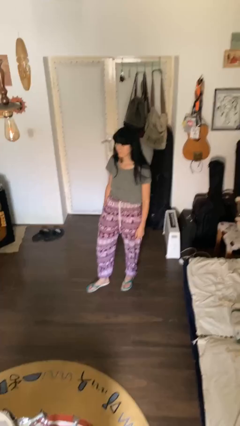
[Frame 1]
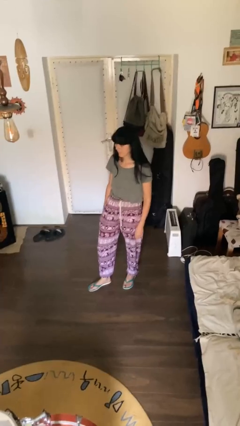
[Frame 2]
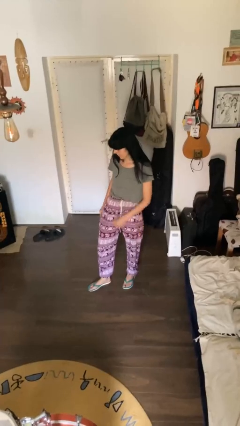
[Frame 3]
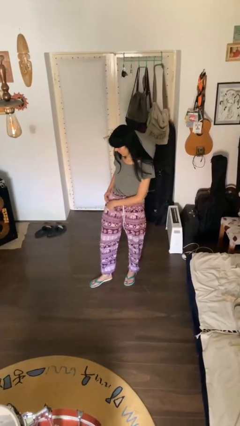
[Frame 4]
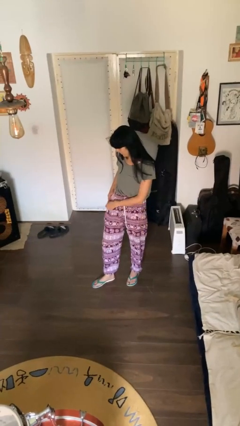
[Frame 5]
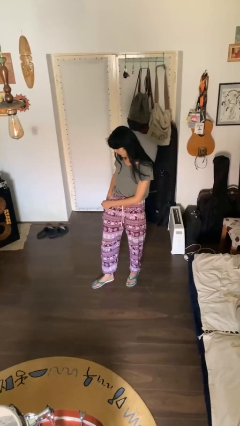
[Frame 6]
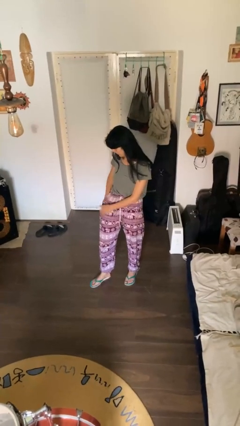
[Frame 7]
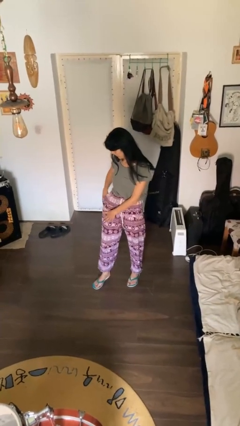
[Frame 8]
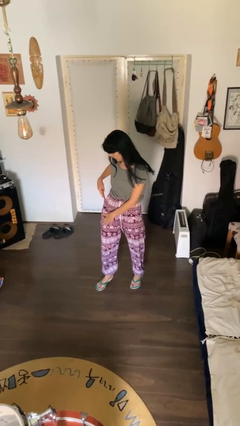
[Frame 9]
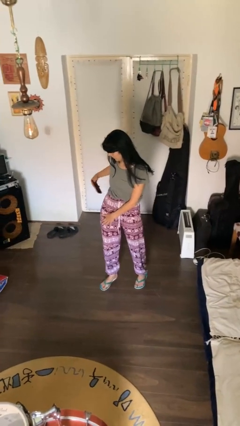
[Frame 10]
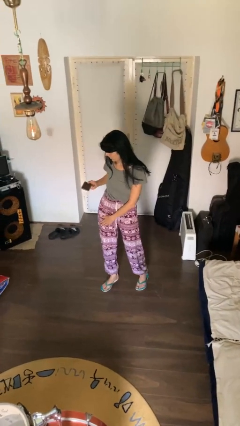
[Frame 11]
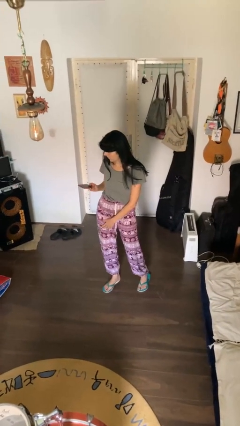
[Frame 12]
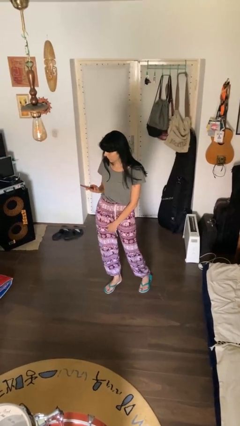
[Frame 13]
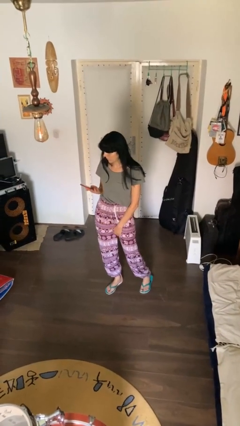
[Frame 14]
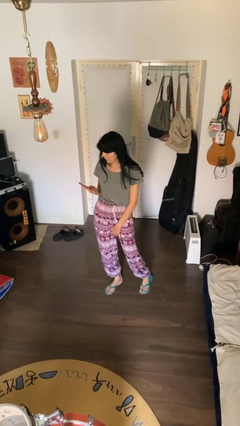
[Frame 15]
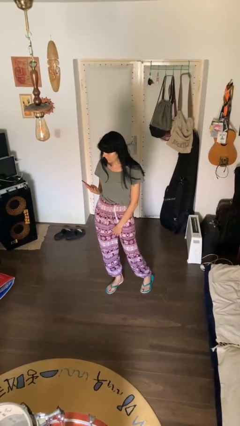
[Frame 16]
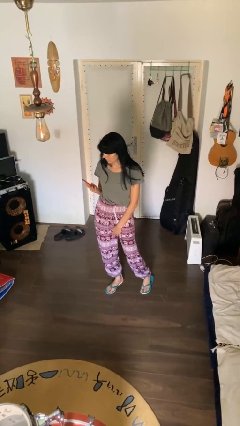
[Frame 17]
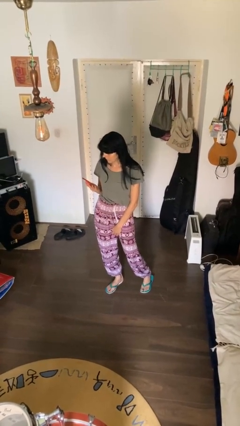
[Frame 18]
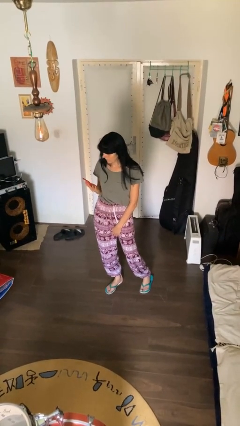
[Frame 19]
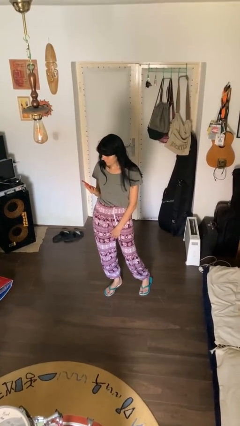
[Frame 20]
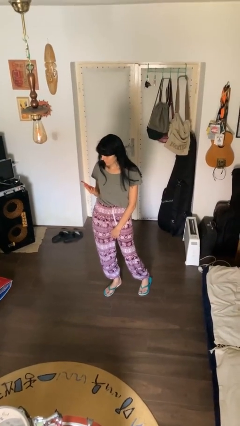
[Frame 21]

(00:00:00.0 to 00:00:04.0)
person takes phone from pocket

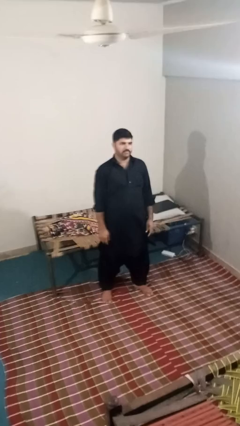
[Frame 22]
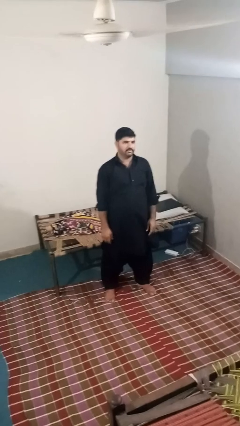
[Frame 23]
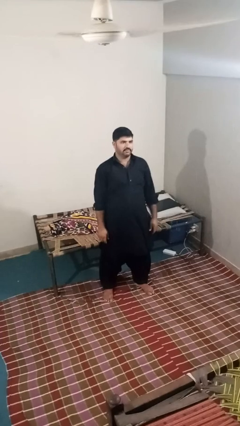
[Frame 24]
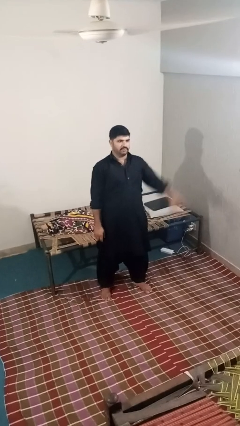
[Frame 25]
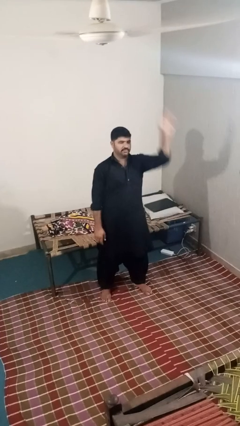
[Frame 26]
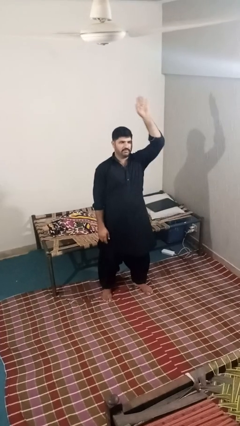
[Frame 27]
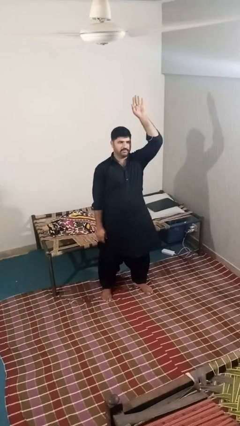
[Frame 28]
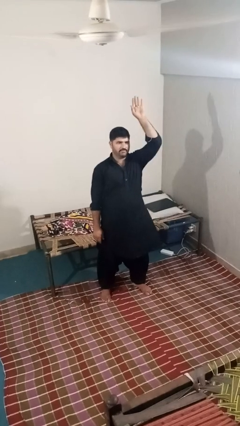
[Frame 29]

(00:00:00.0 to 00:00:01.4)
person gestures raise hand

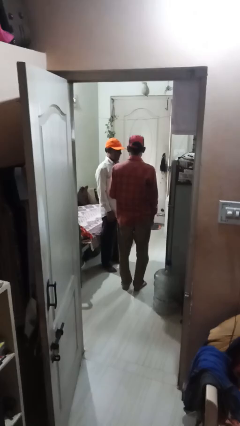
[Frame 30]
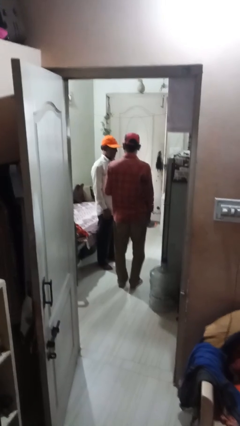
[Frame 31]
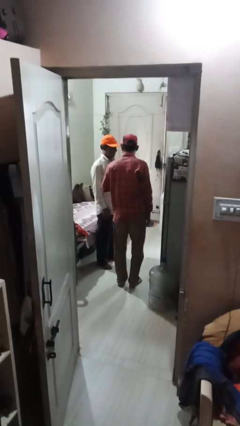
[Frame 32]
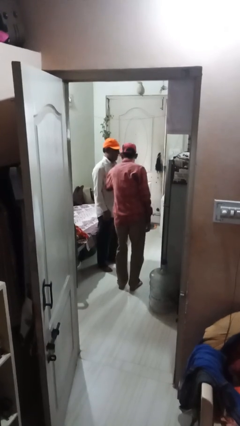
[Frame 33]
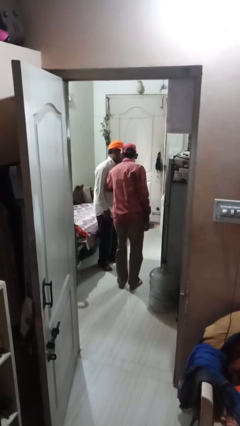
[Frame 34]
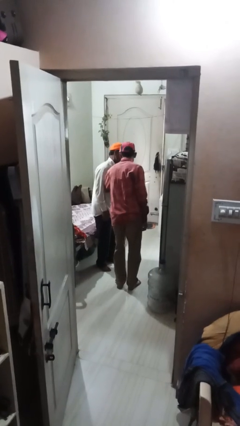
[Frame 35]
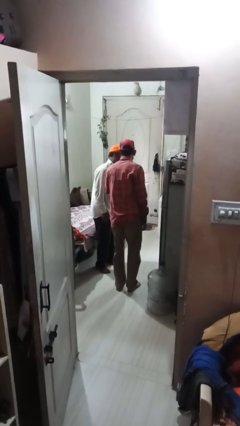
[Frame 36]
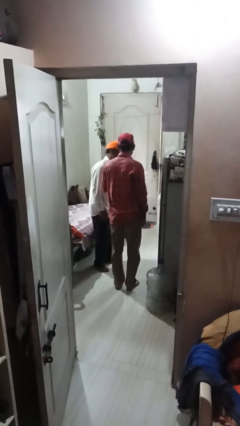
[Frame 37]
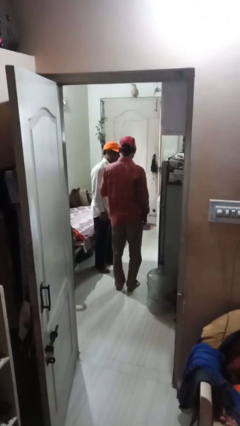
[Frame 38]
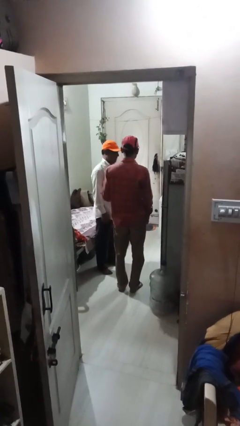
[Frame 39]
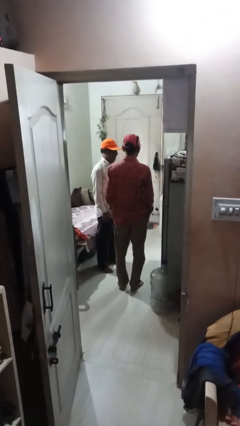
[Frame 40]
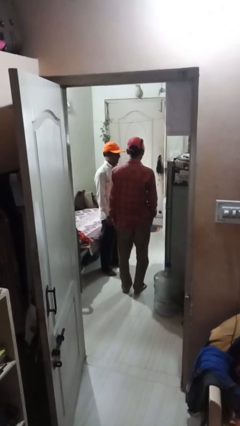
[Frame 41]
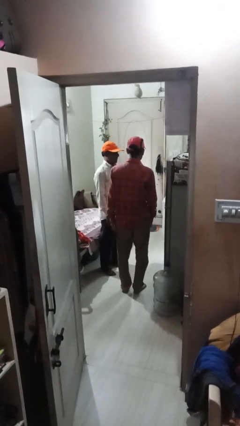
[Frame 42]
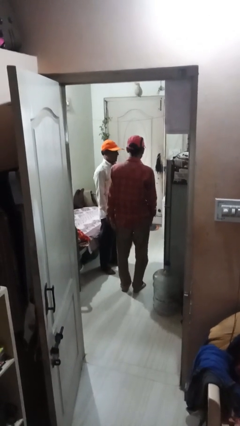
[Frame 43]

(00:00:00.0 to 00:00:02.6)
person nudges person with elbow

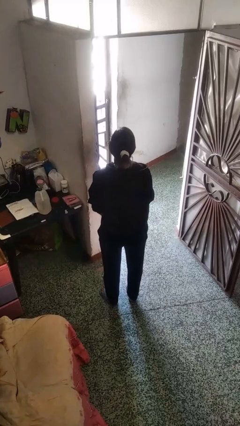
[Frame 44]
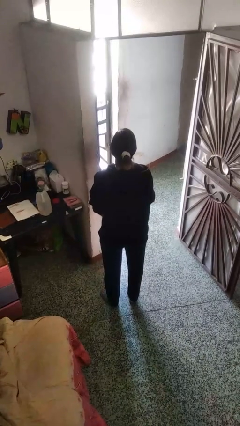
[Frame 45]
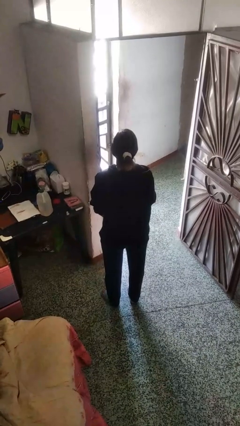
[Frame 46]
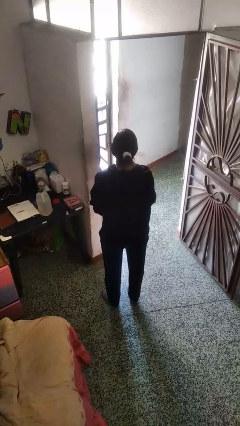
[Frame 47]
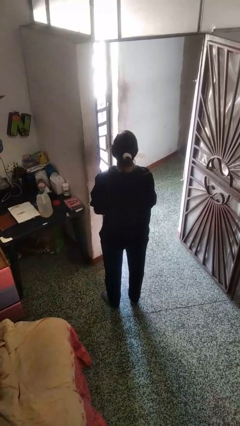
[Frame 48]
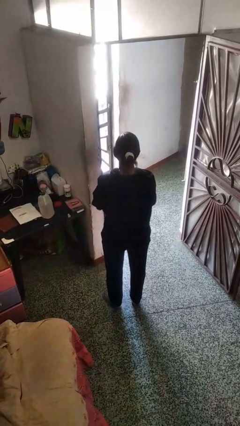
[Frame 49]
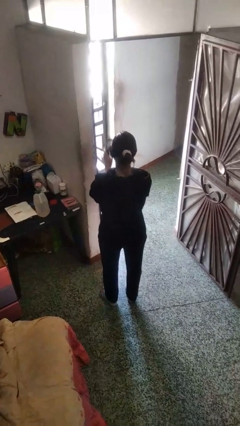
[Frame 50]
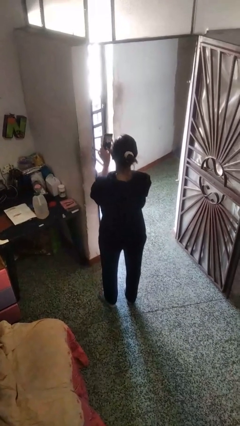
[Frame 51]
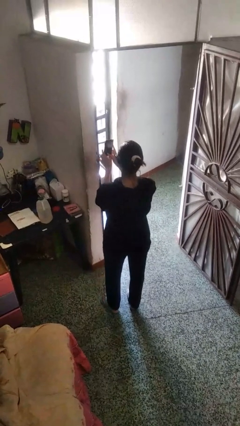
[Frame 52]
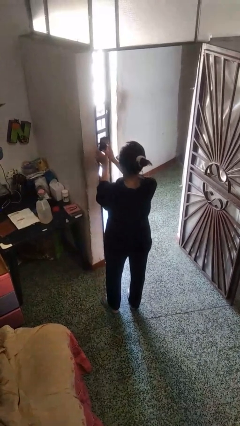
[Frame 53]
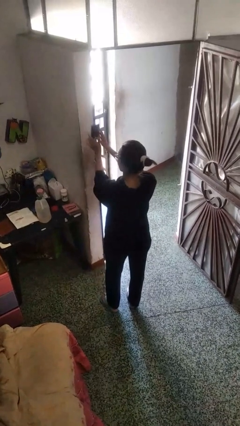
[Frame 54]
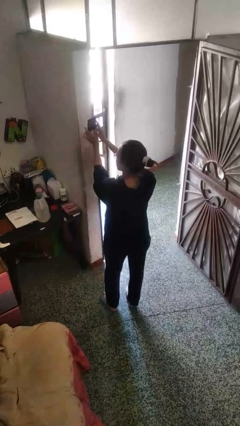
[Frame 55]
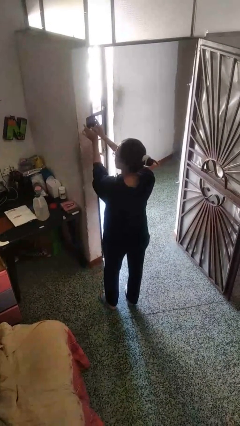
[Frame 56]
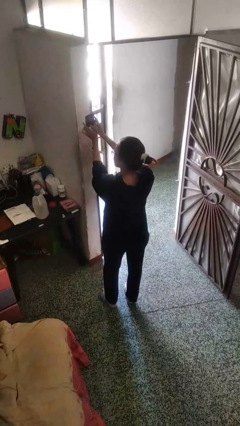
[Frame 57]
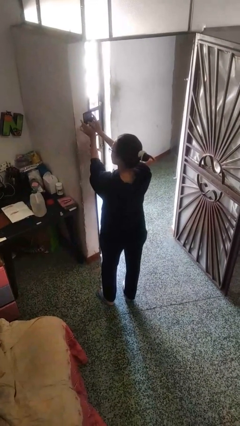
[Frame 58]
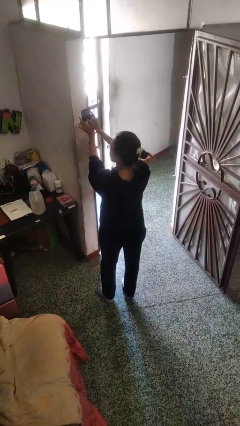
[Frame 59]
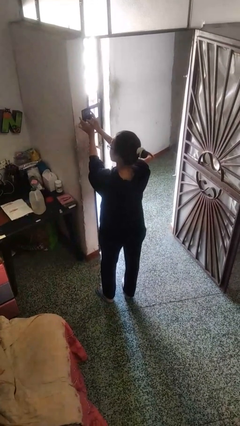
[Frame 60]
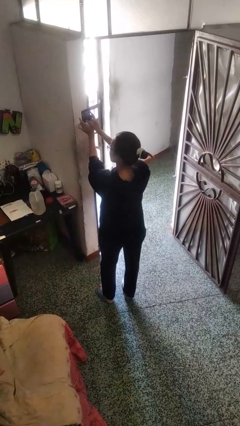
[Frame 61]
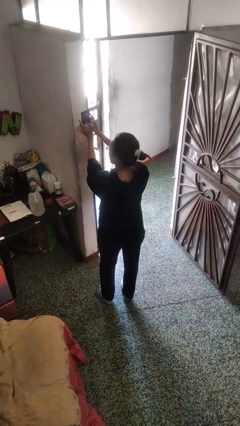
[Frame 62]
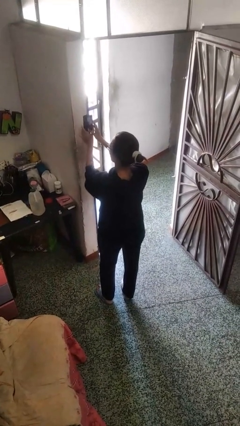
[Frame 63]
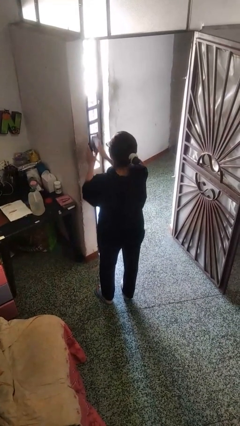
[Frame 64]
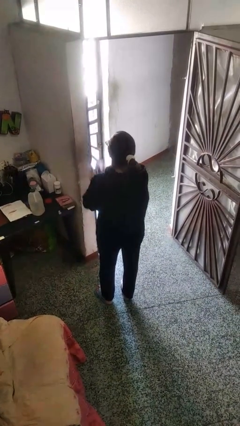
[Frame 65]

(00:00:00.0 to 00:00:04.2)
person takes selfie

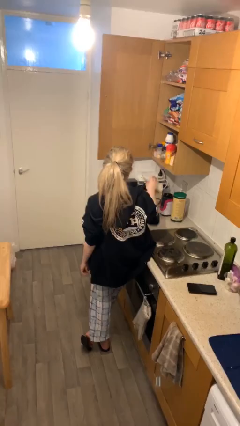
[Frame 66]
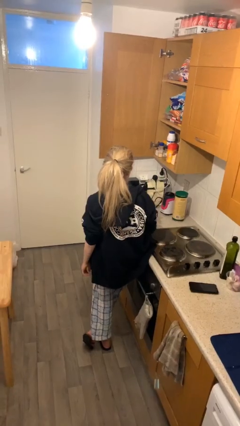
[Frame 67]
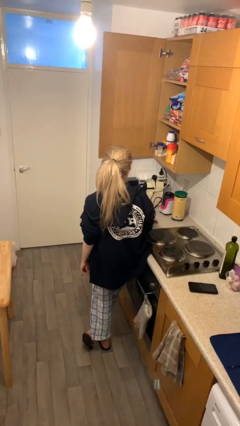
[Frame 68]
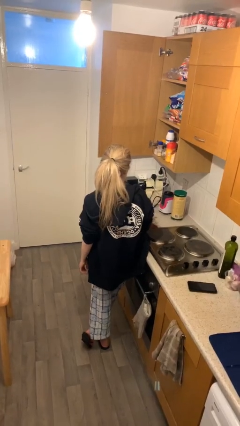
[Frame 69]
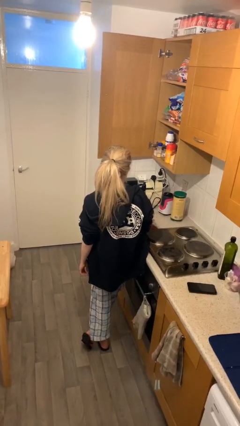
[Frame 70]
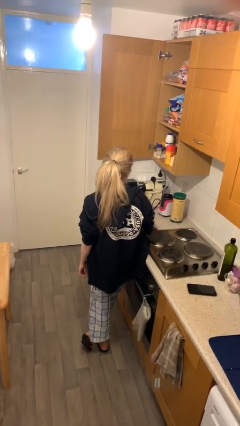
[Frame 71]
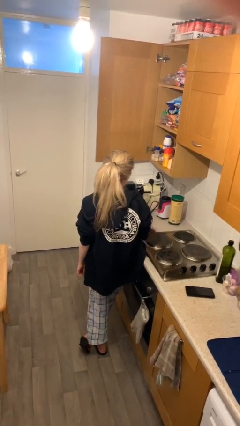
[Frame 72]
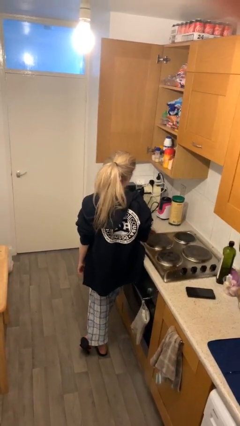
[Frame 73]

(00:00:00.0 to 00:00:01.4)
person puts down object on table

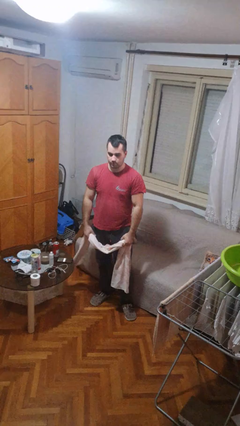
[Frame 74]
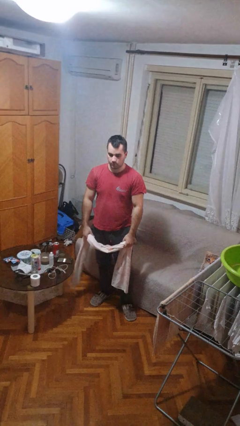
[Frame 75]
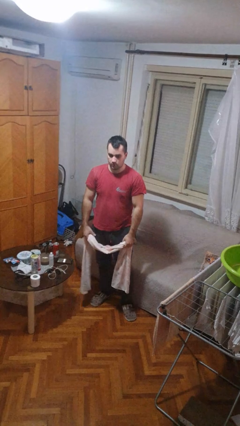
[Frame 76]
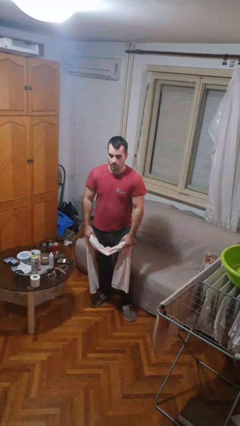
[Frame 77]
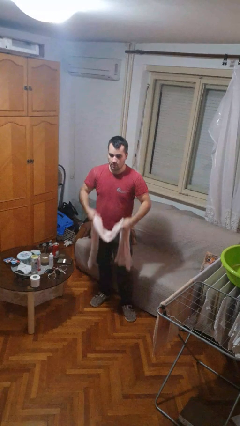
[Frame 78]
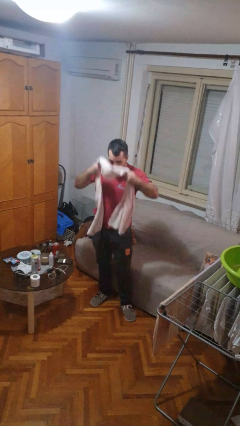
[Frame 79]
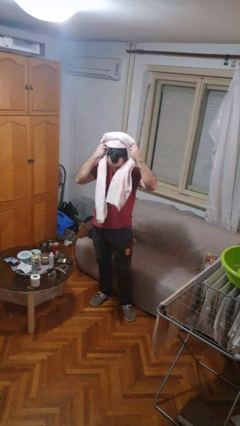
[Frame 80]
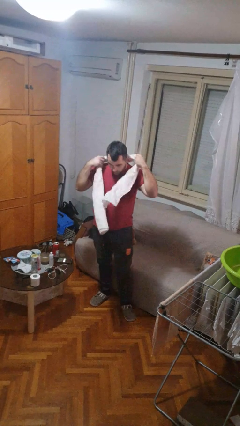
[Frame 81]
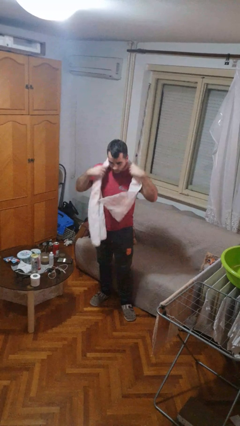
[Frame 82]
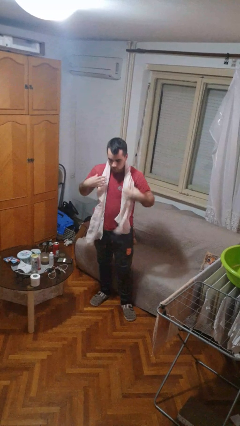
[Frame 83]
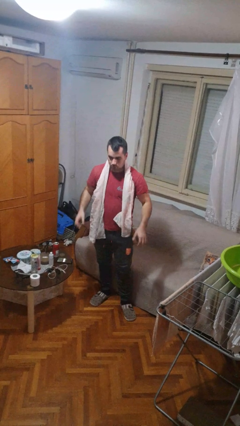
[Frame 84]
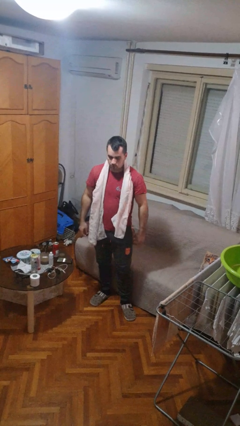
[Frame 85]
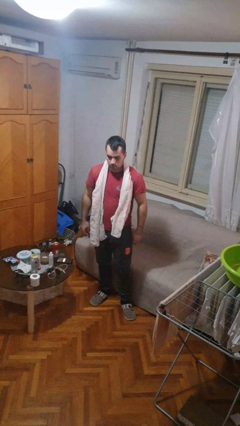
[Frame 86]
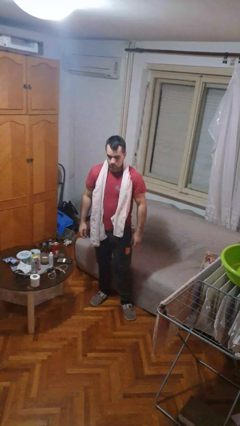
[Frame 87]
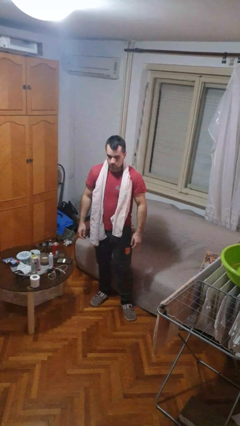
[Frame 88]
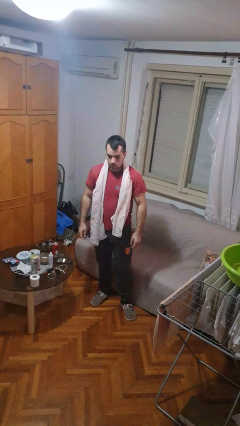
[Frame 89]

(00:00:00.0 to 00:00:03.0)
person puts on scarf

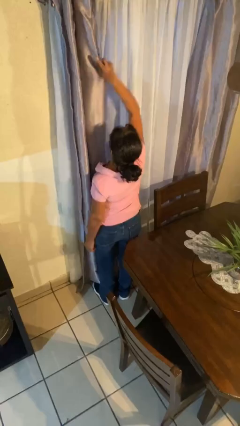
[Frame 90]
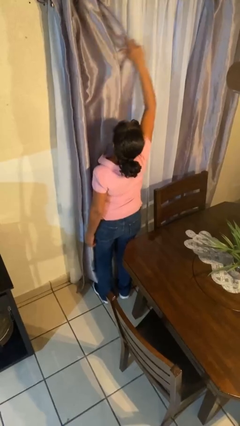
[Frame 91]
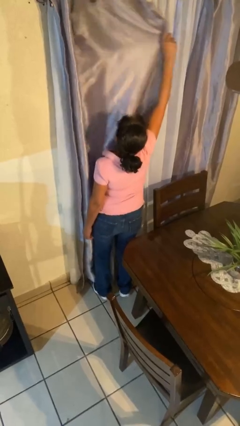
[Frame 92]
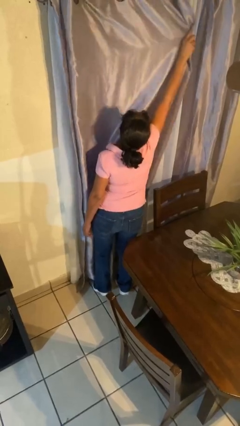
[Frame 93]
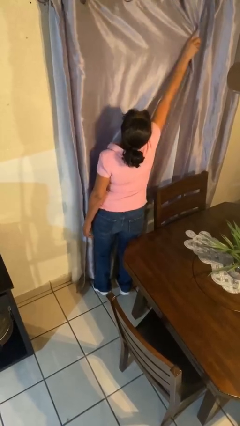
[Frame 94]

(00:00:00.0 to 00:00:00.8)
person closes curtains
